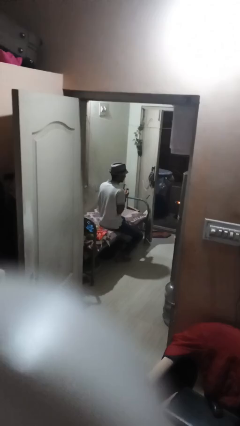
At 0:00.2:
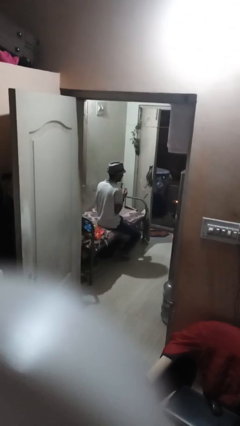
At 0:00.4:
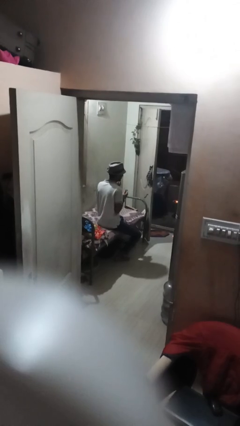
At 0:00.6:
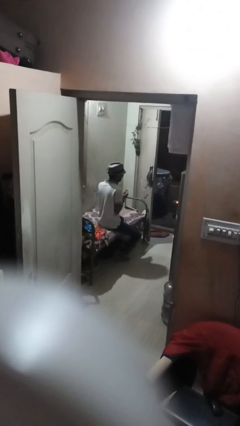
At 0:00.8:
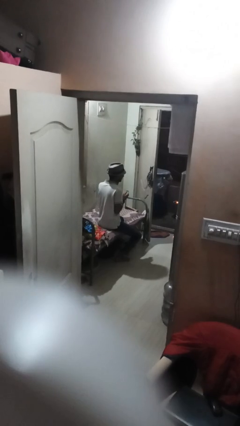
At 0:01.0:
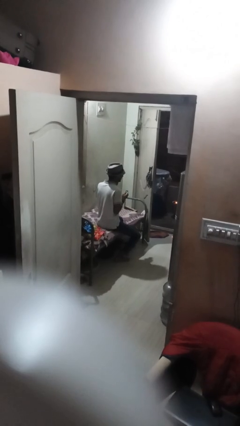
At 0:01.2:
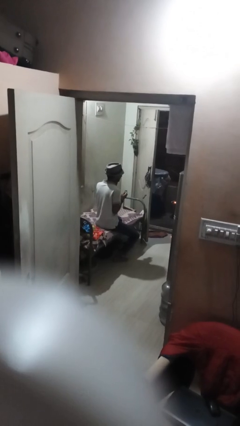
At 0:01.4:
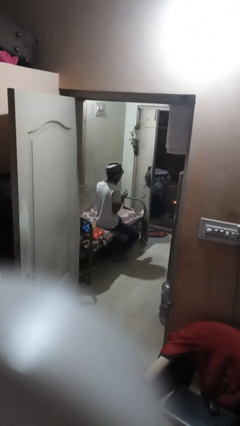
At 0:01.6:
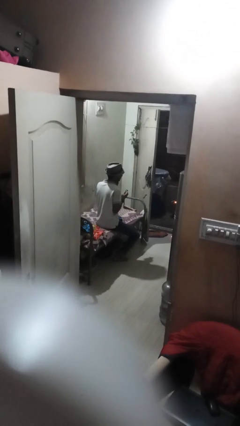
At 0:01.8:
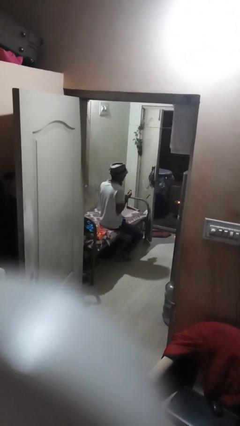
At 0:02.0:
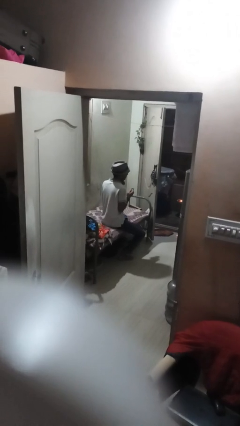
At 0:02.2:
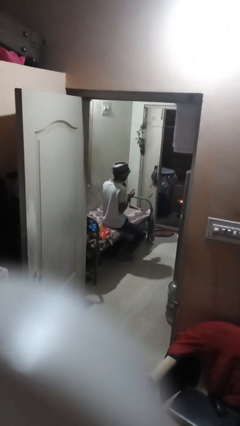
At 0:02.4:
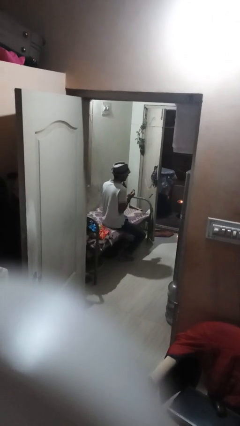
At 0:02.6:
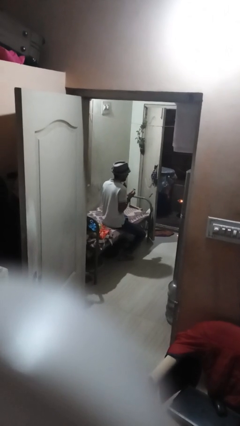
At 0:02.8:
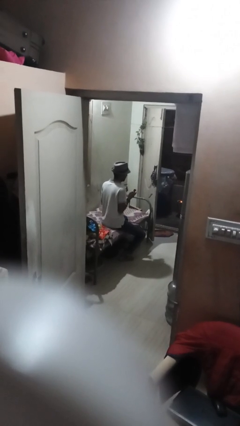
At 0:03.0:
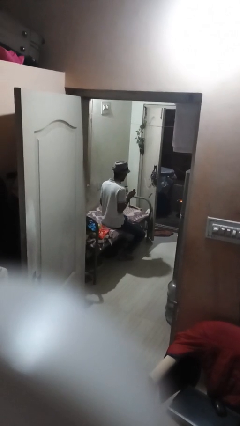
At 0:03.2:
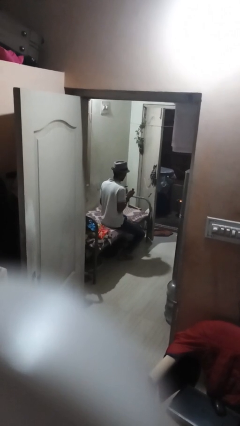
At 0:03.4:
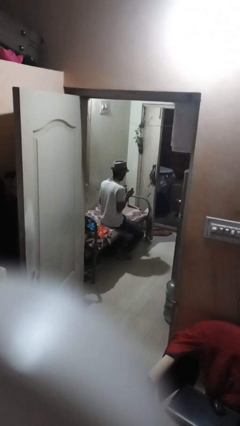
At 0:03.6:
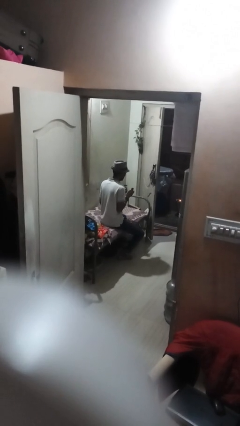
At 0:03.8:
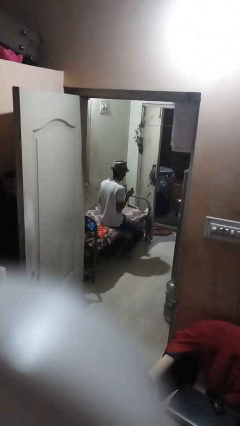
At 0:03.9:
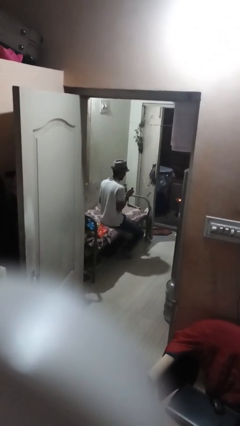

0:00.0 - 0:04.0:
person shaves face

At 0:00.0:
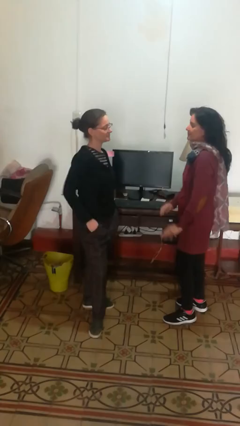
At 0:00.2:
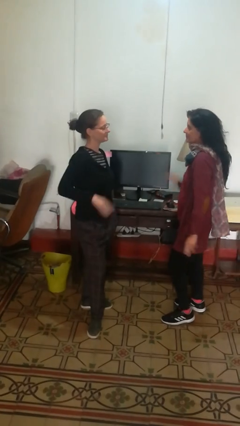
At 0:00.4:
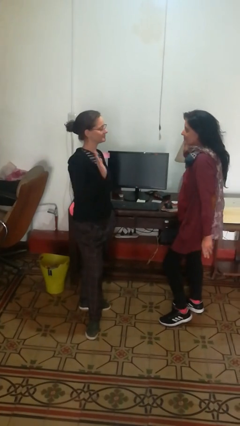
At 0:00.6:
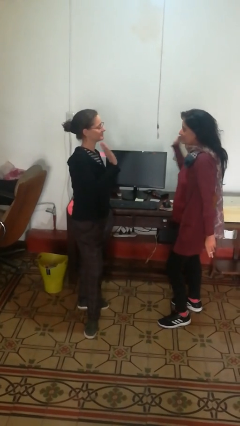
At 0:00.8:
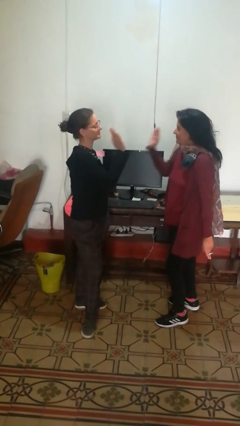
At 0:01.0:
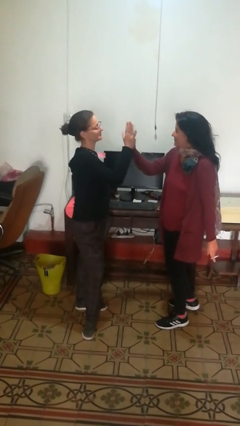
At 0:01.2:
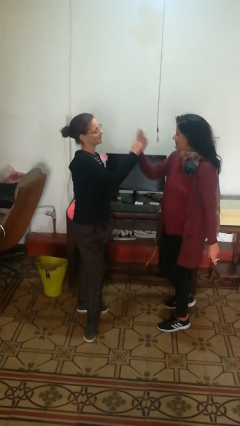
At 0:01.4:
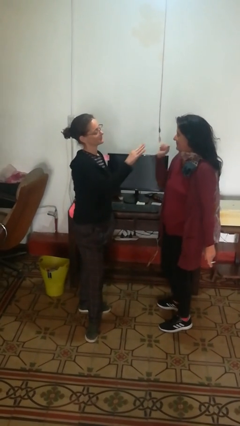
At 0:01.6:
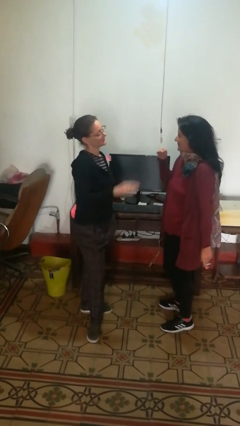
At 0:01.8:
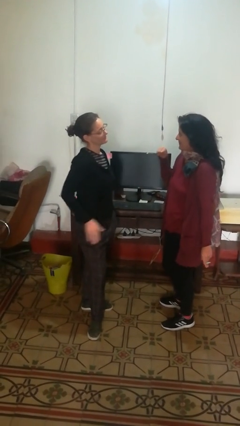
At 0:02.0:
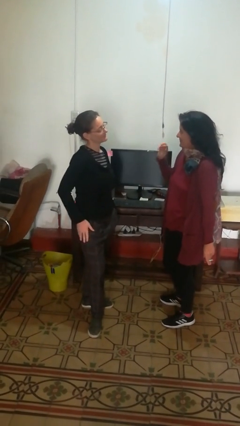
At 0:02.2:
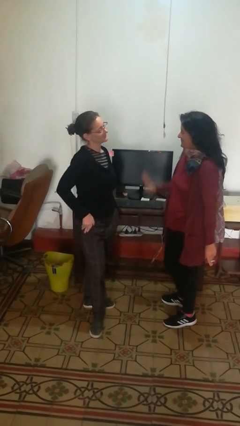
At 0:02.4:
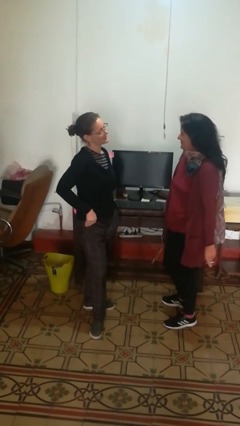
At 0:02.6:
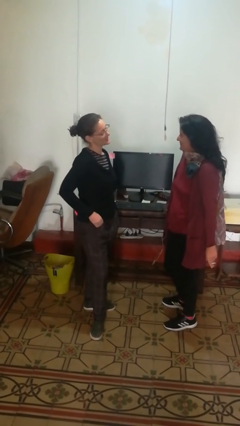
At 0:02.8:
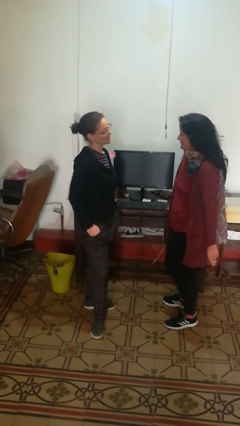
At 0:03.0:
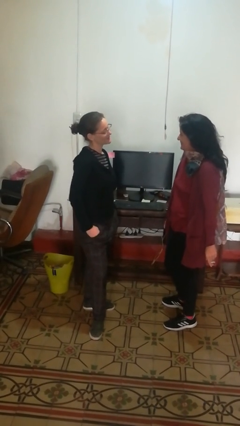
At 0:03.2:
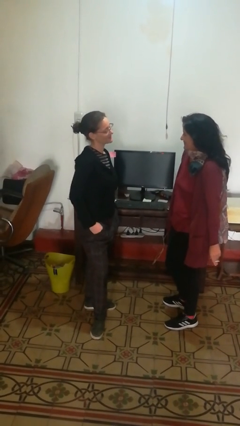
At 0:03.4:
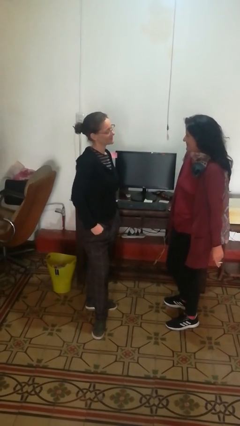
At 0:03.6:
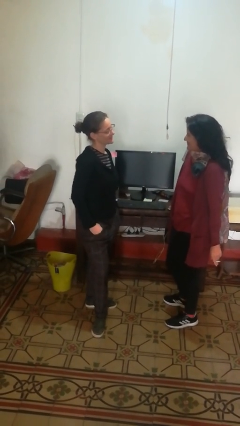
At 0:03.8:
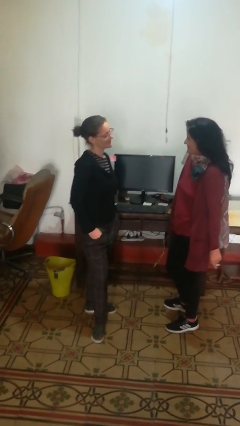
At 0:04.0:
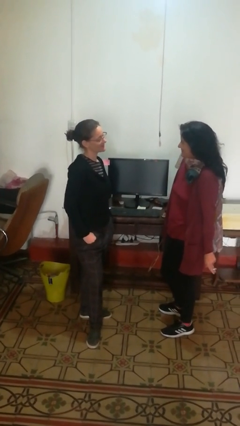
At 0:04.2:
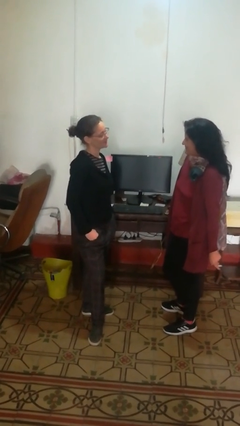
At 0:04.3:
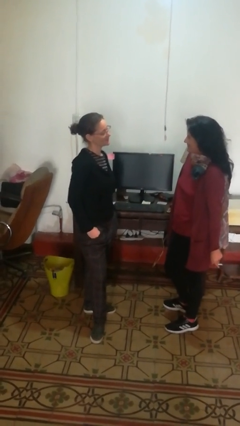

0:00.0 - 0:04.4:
person highfives hand

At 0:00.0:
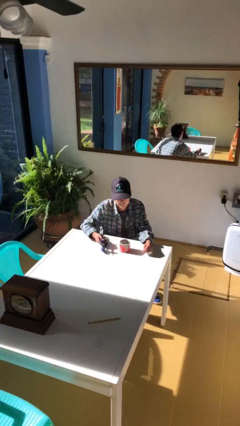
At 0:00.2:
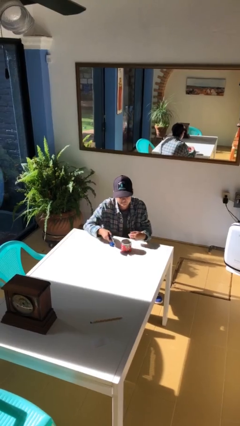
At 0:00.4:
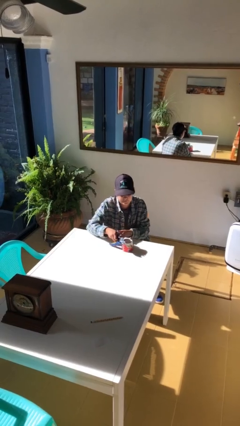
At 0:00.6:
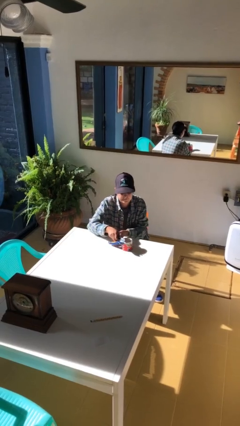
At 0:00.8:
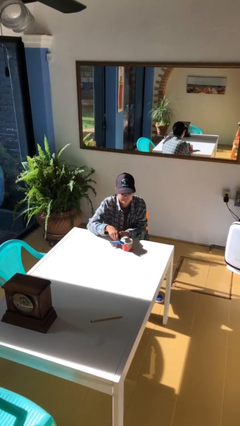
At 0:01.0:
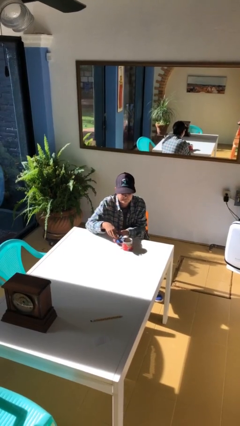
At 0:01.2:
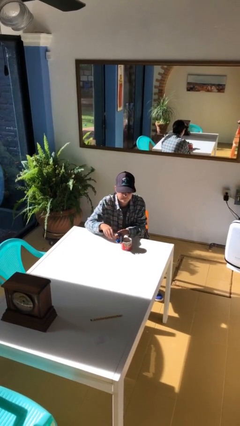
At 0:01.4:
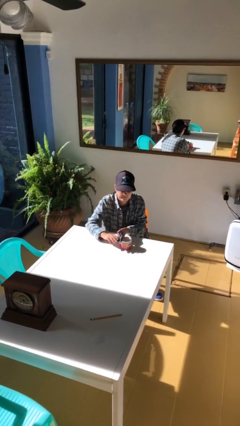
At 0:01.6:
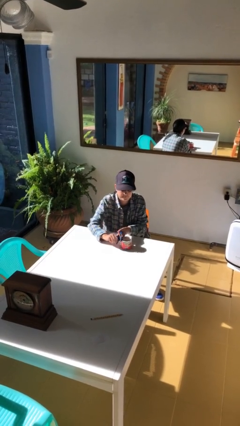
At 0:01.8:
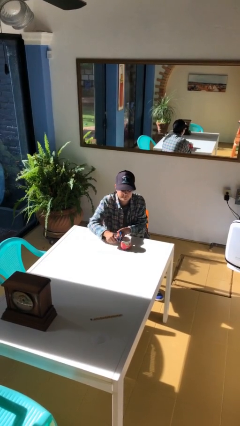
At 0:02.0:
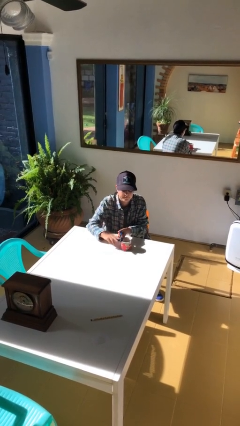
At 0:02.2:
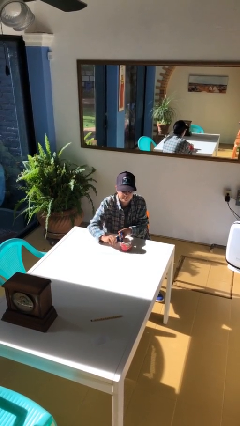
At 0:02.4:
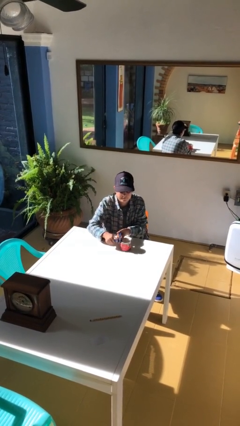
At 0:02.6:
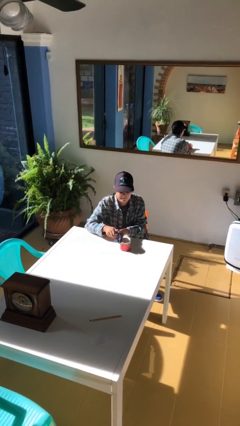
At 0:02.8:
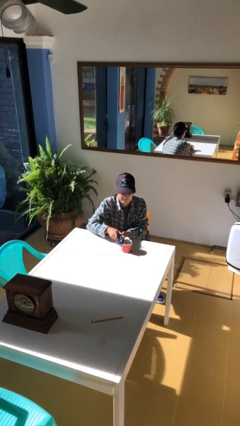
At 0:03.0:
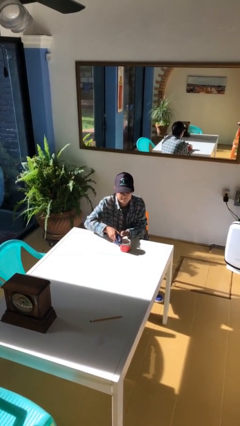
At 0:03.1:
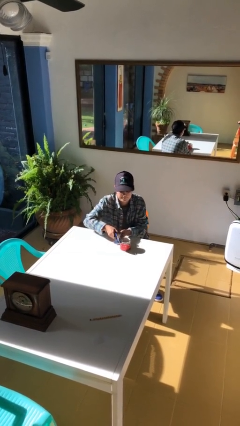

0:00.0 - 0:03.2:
person opens can with can opener

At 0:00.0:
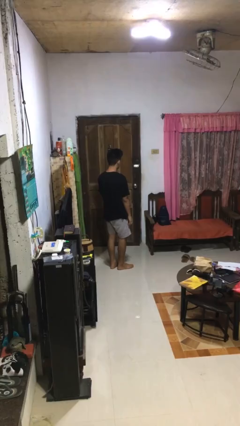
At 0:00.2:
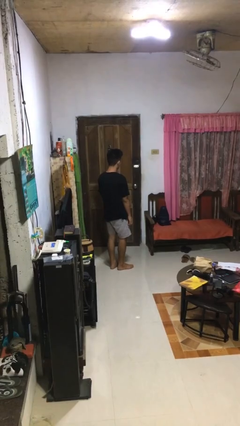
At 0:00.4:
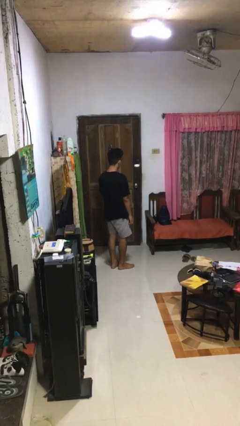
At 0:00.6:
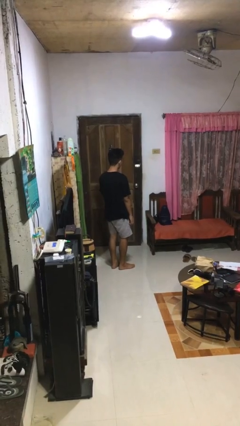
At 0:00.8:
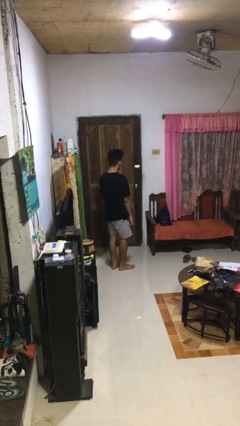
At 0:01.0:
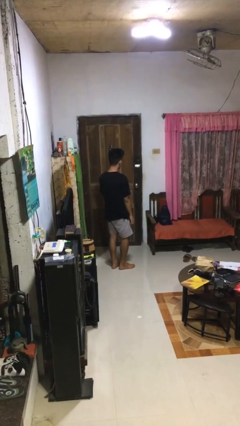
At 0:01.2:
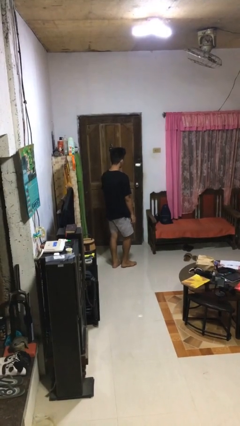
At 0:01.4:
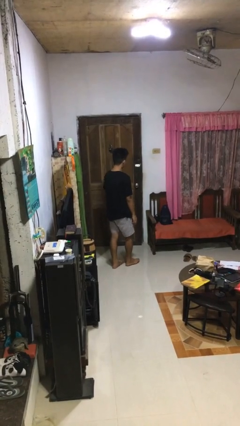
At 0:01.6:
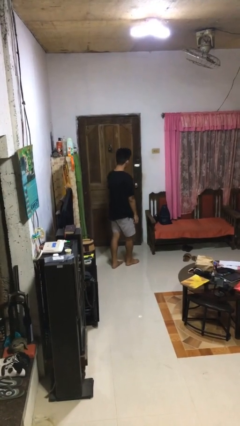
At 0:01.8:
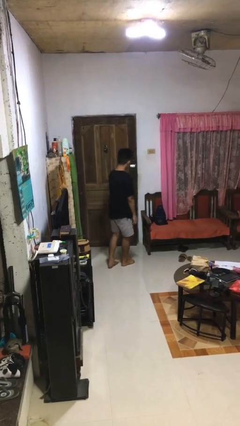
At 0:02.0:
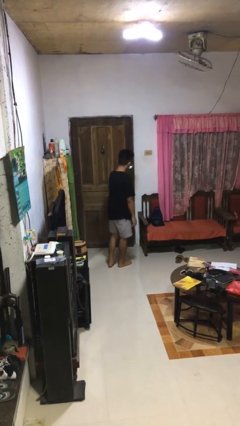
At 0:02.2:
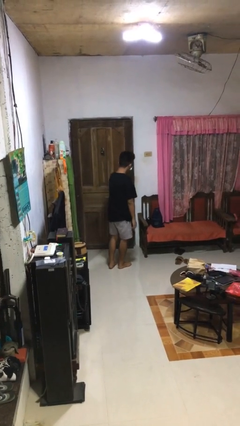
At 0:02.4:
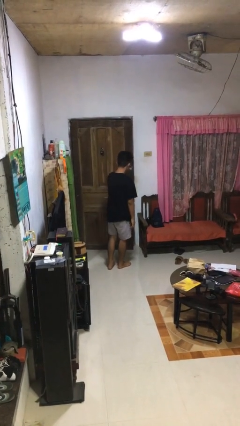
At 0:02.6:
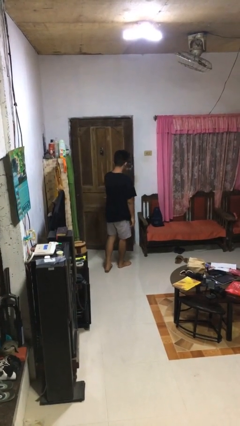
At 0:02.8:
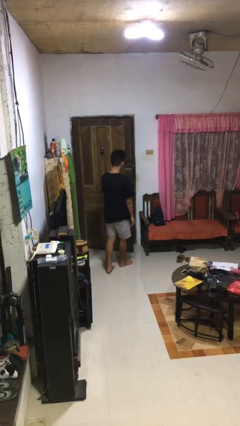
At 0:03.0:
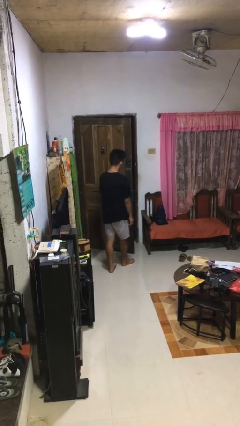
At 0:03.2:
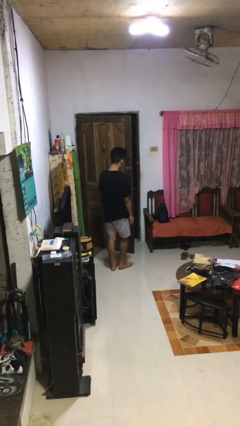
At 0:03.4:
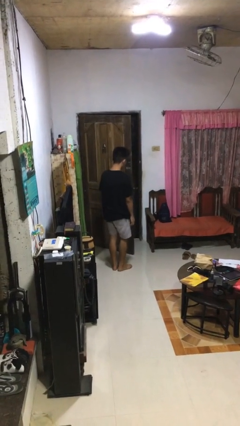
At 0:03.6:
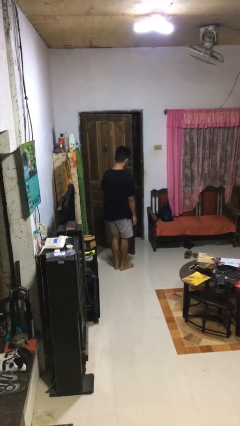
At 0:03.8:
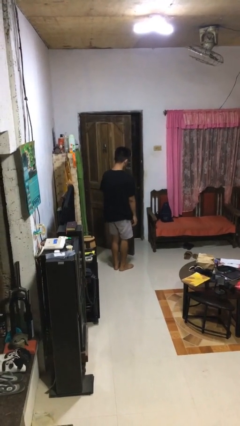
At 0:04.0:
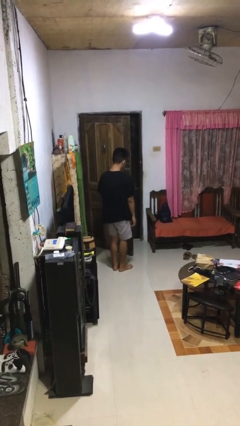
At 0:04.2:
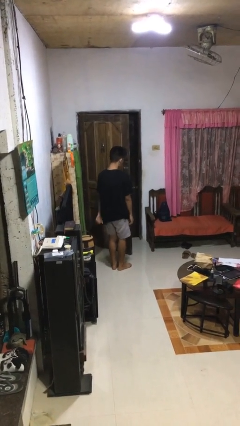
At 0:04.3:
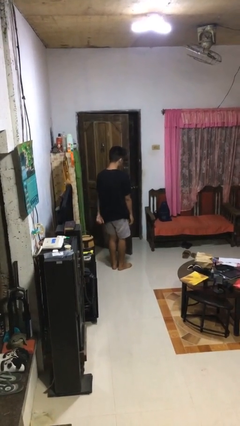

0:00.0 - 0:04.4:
person opens facility door

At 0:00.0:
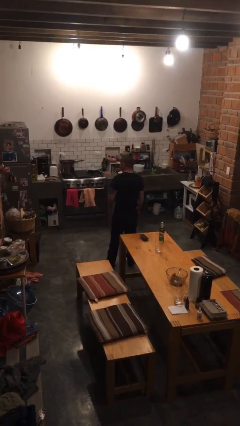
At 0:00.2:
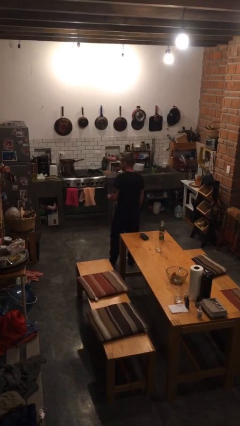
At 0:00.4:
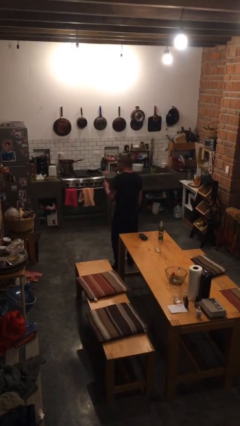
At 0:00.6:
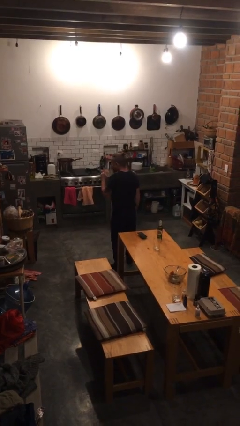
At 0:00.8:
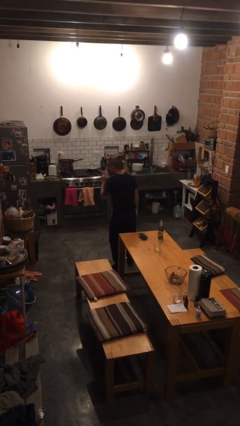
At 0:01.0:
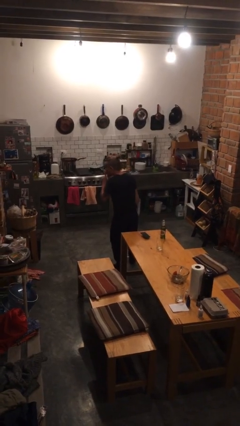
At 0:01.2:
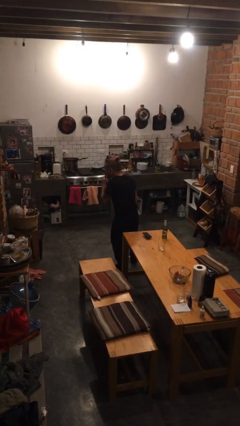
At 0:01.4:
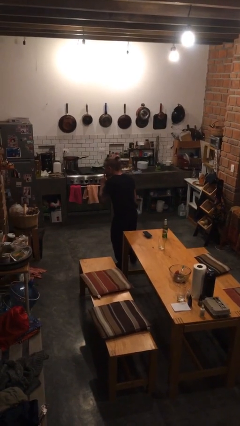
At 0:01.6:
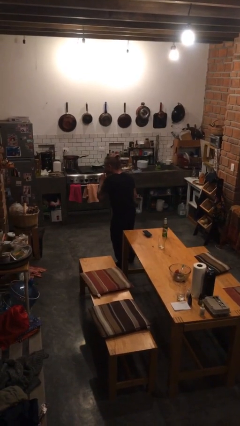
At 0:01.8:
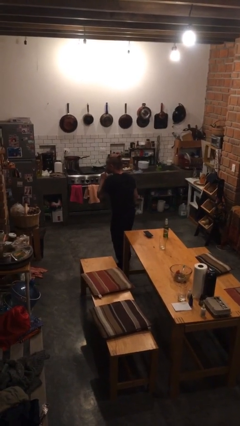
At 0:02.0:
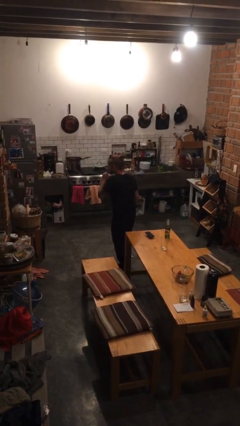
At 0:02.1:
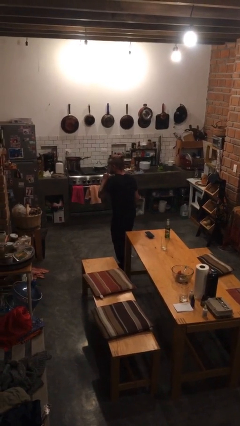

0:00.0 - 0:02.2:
person gestures be quiet
